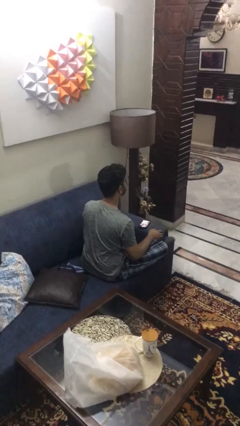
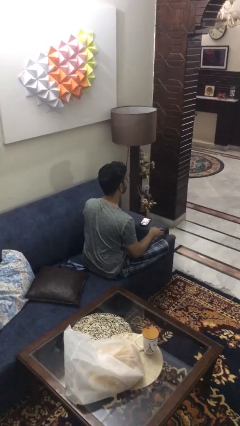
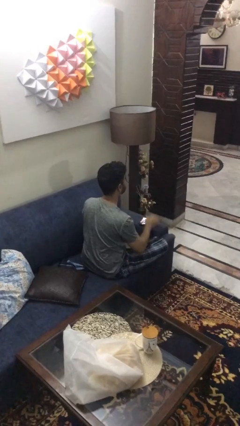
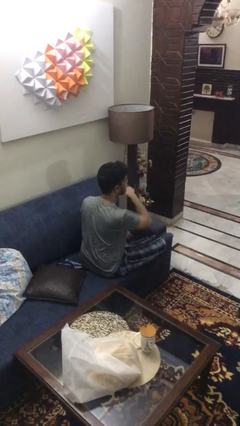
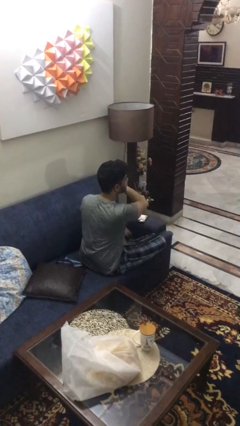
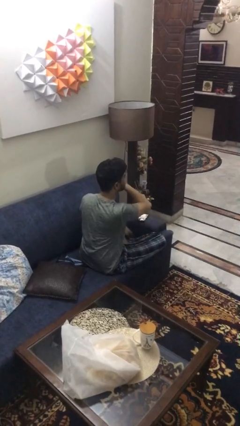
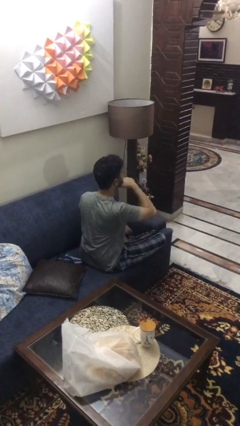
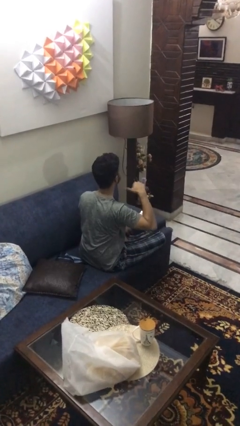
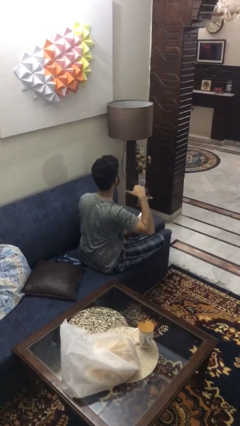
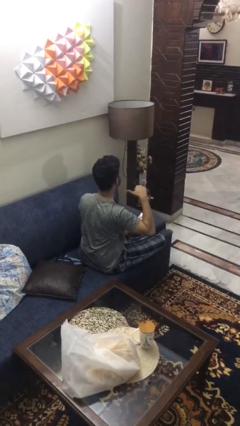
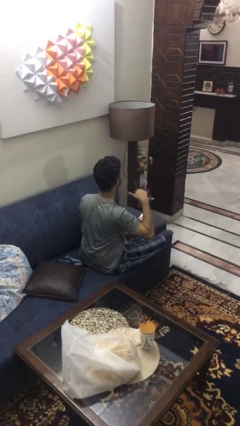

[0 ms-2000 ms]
person gestures cut

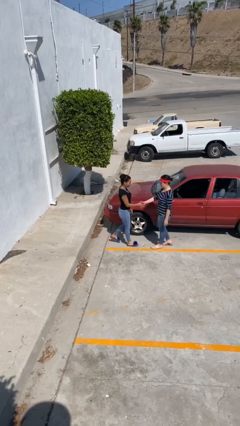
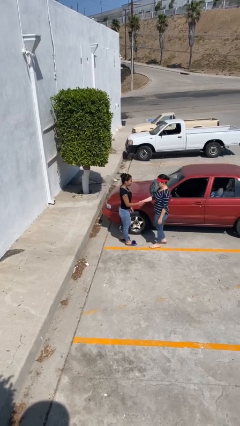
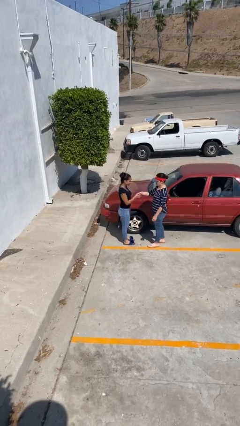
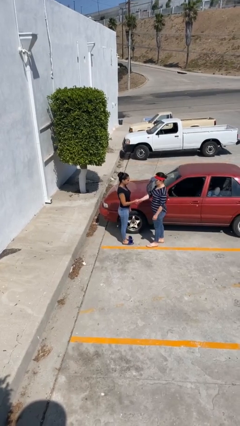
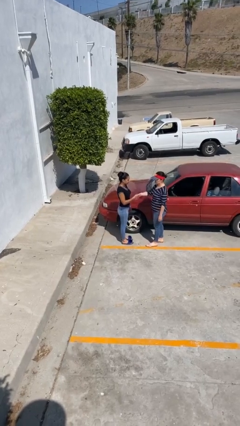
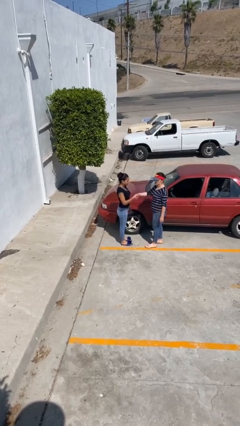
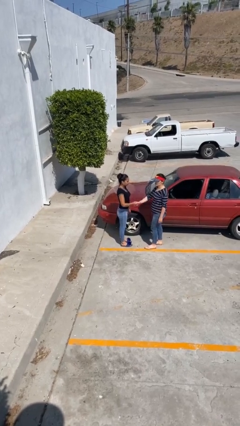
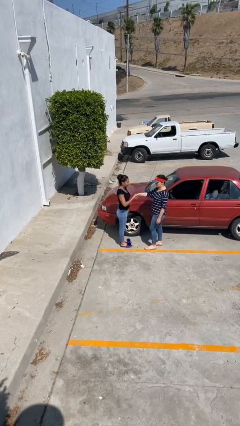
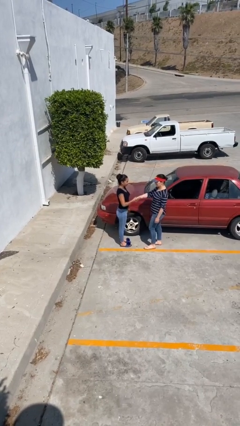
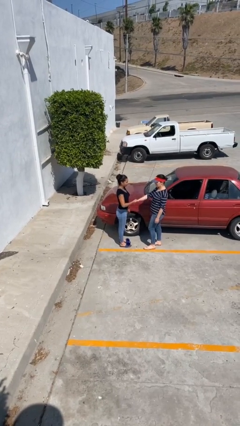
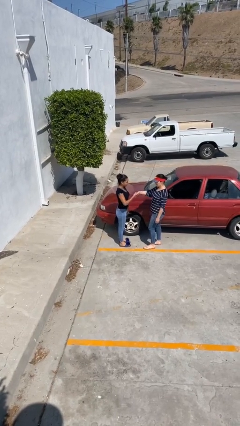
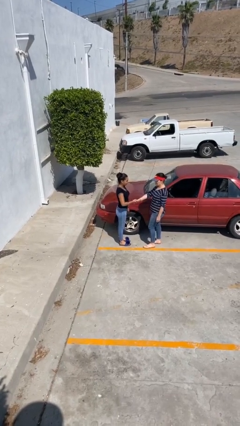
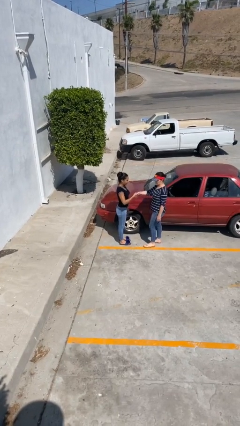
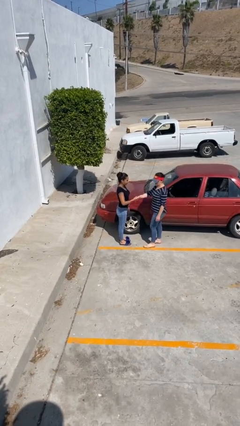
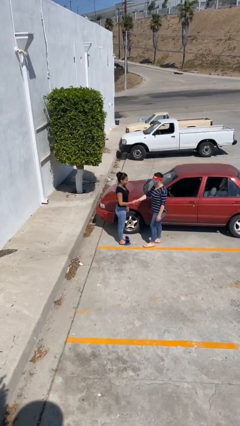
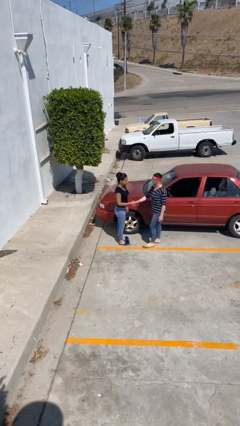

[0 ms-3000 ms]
person shakes hand

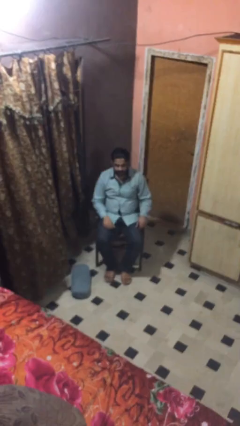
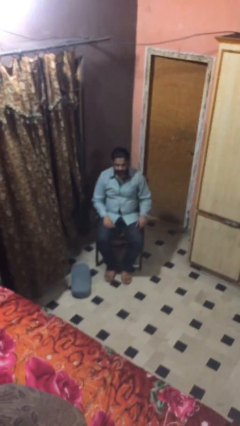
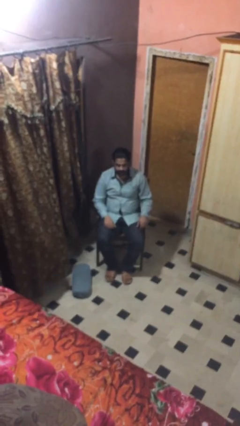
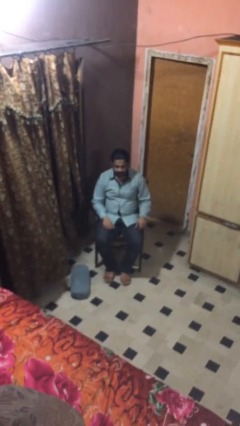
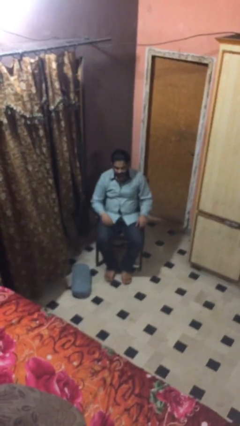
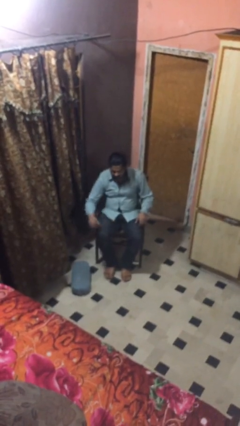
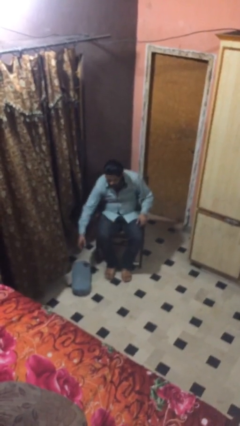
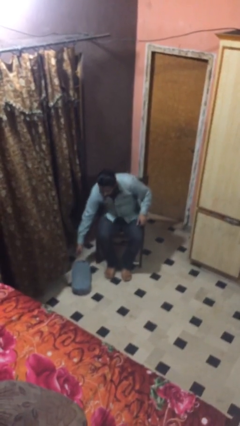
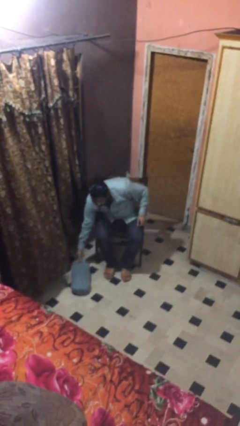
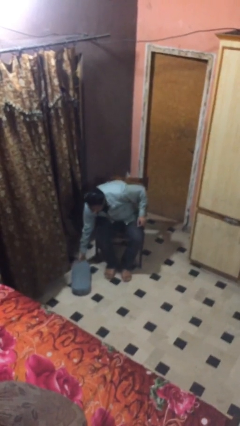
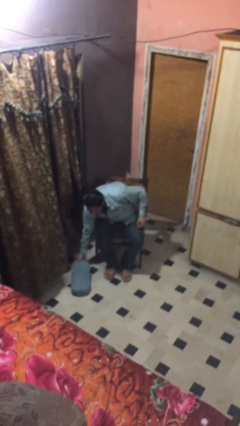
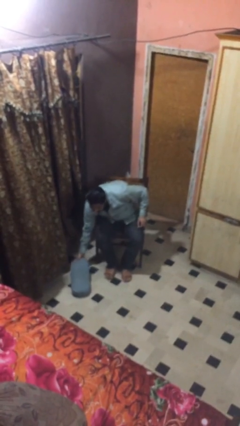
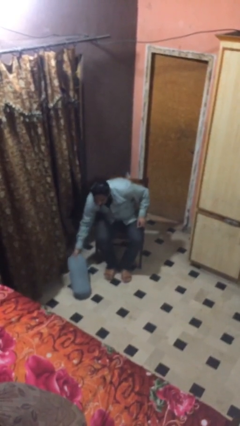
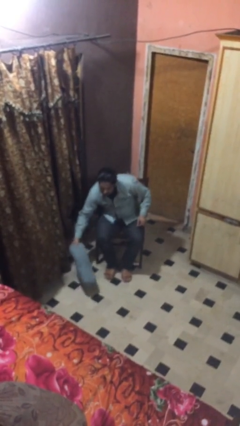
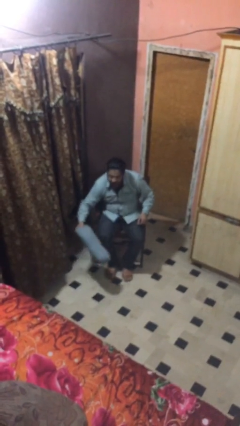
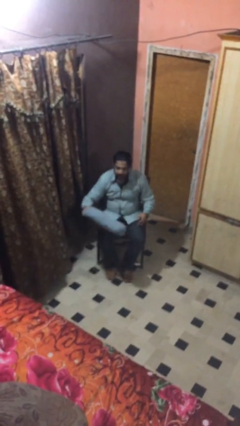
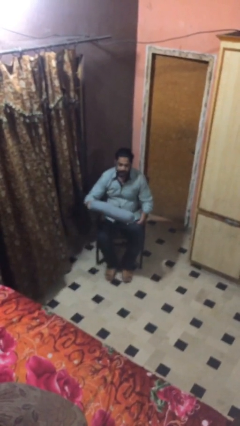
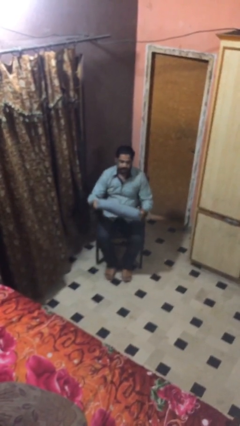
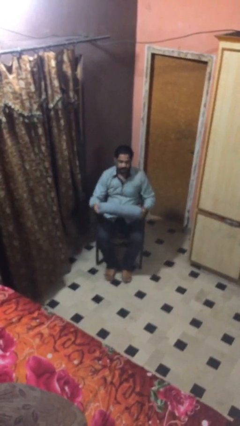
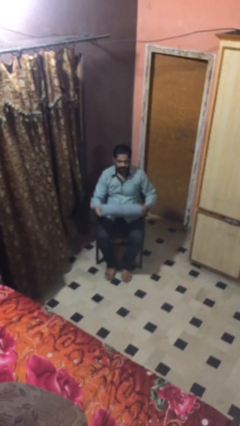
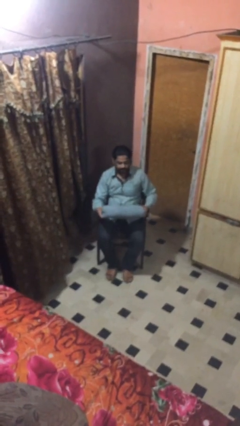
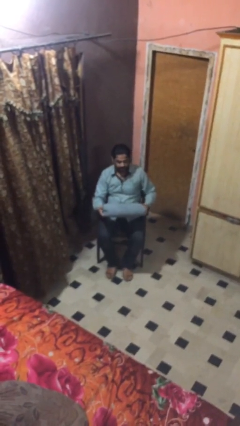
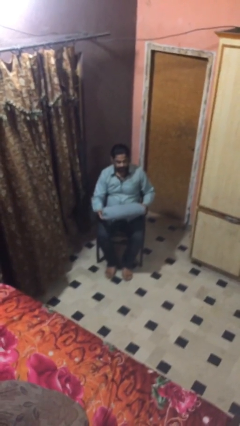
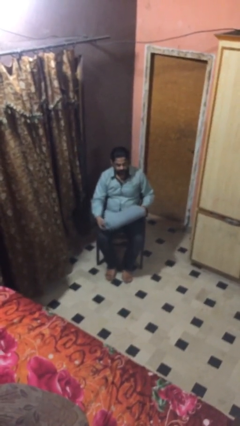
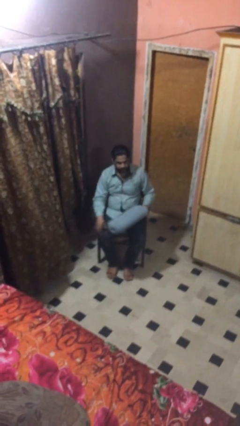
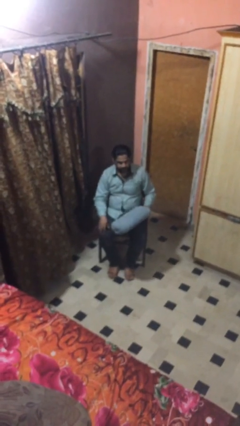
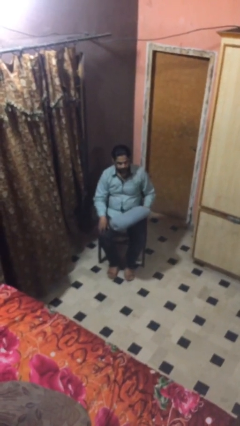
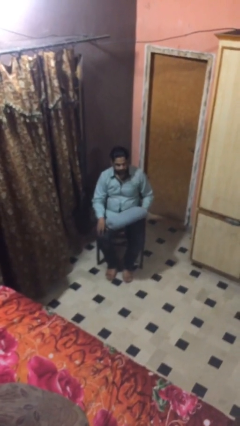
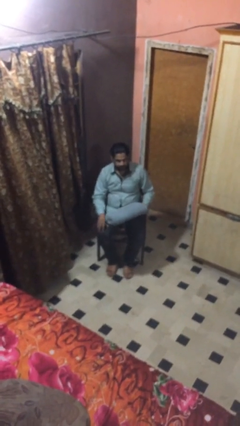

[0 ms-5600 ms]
person picks up object from floor

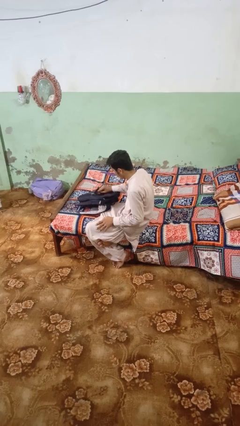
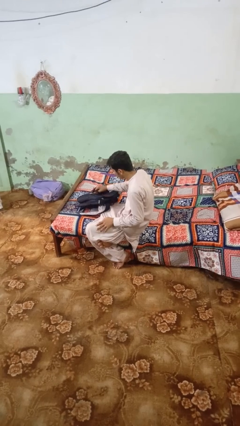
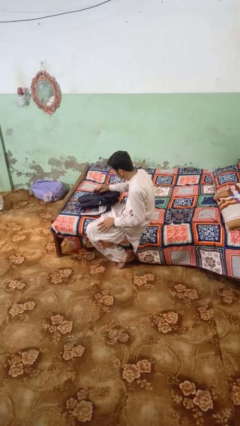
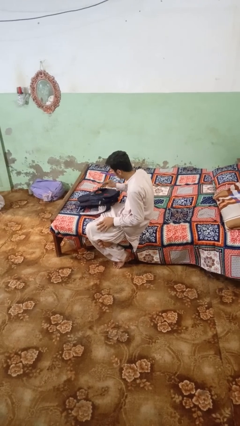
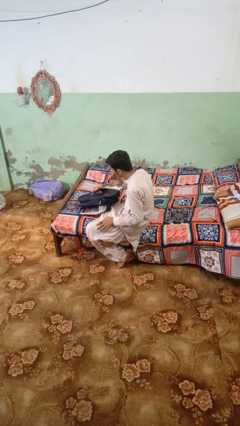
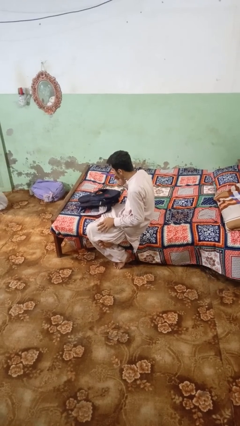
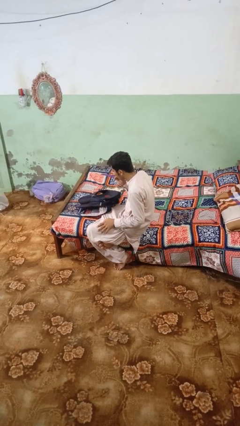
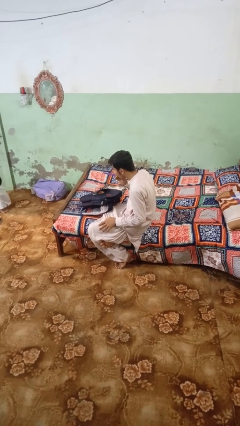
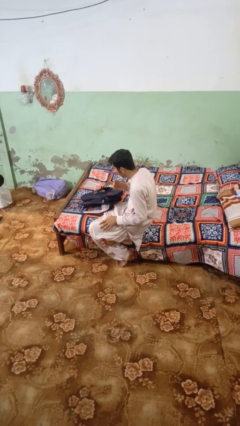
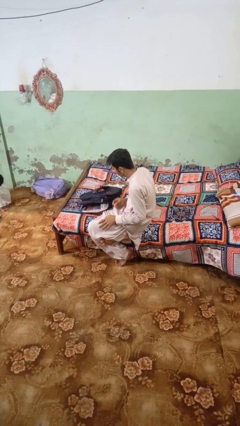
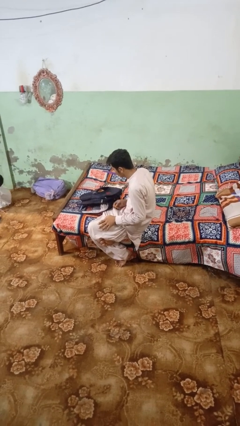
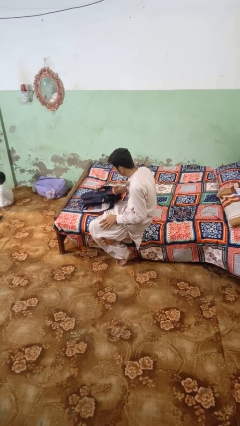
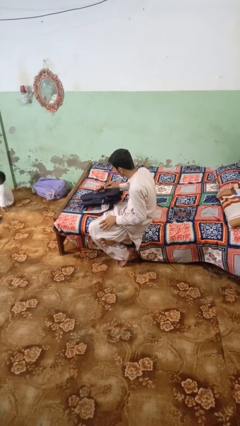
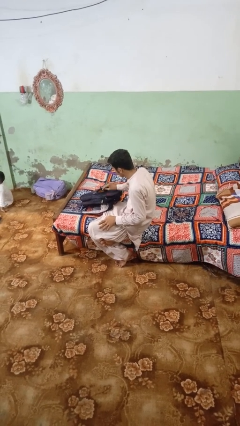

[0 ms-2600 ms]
person eats snack from bag

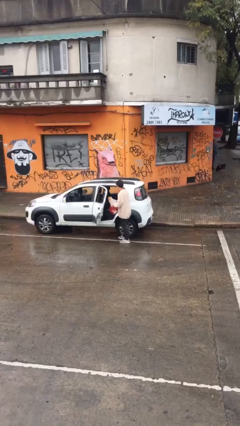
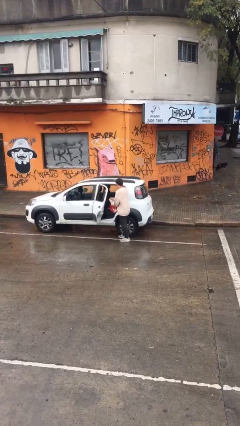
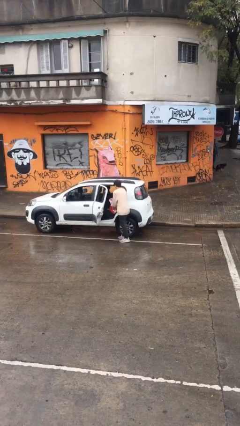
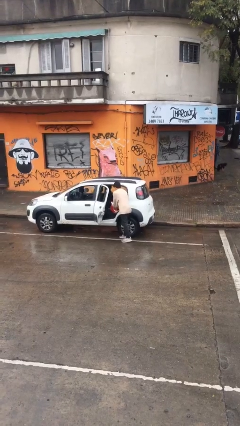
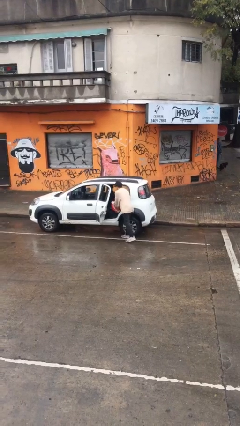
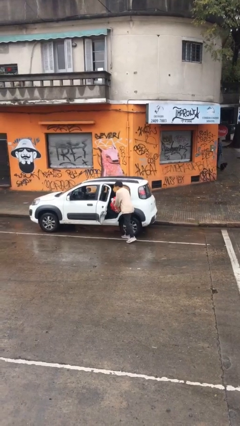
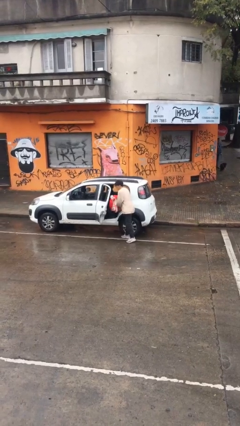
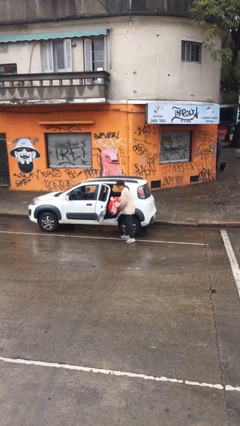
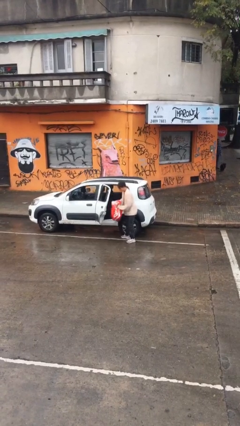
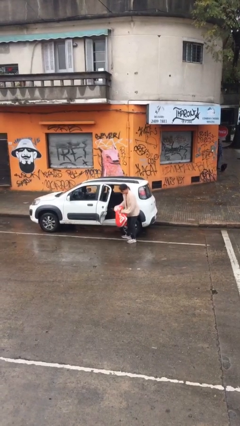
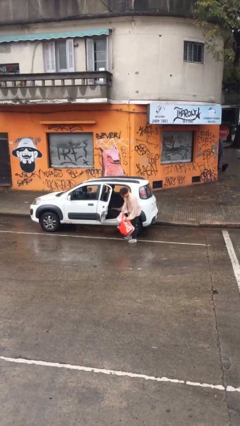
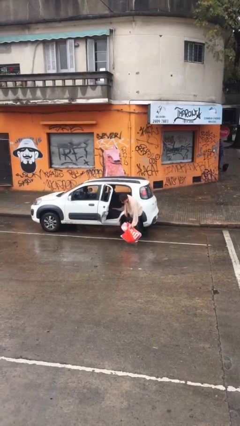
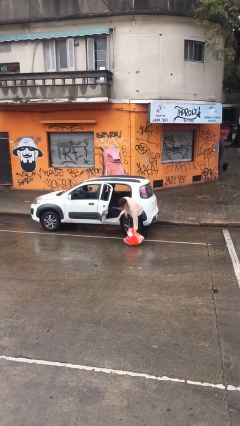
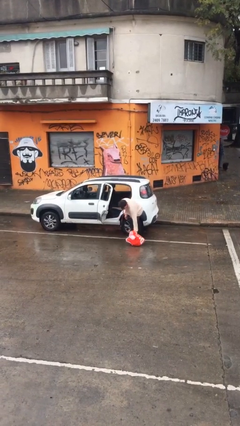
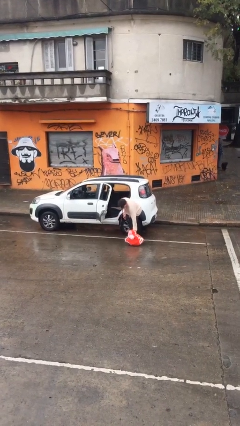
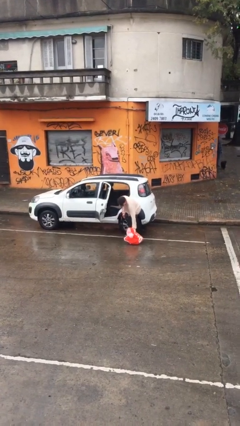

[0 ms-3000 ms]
person unloads car

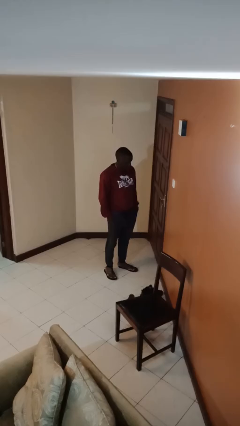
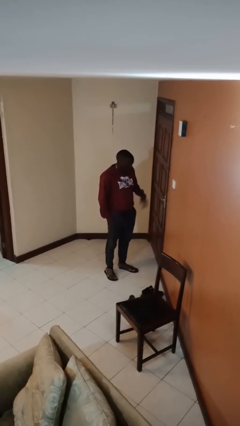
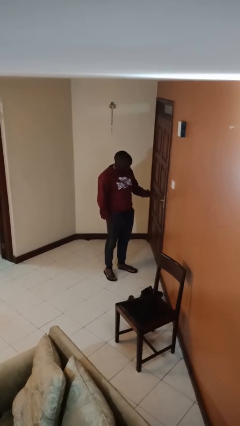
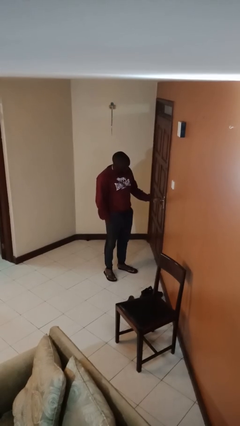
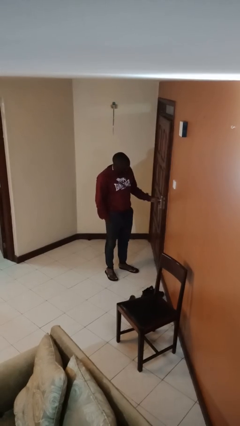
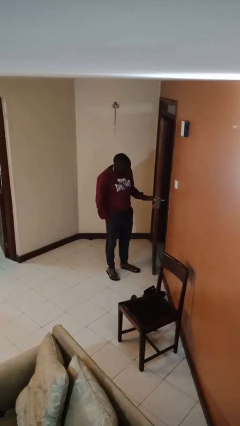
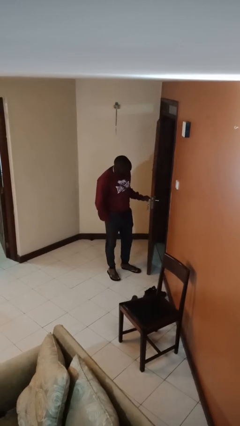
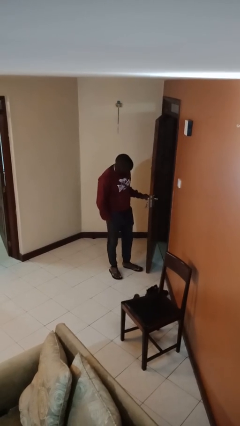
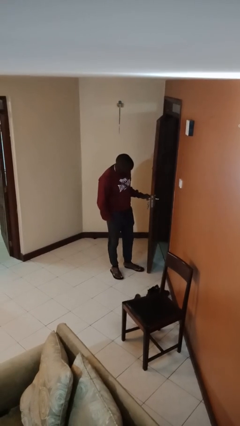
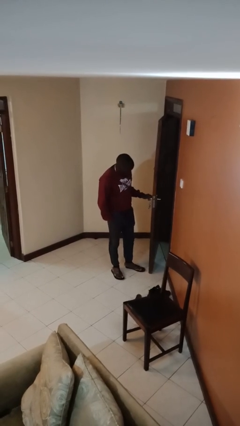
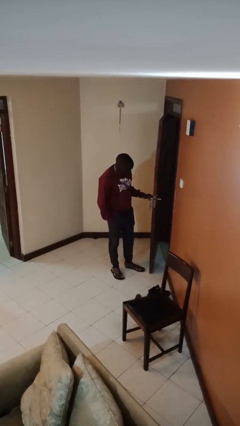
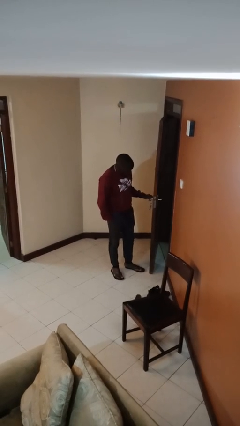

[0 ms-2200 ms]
person opens facility door
